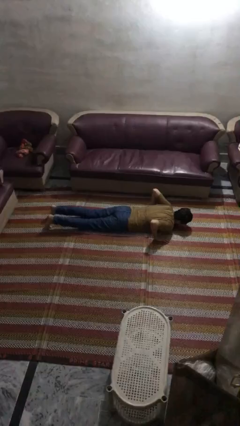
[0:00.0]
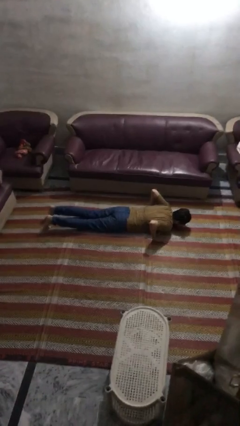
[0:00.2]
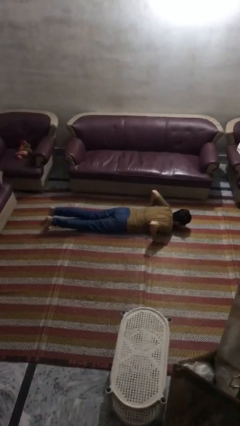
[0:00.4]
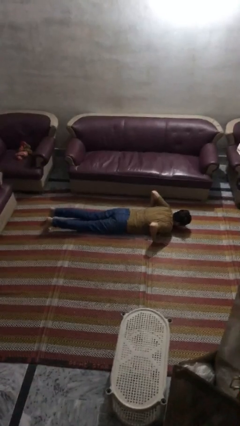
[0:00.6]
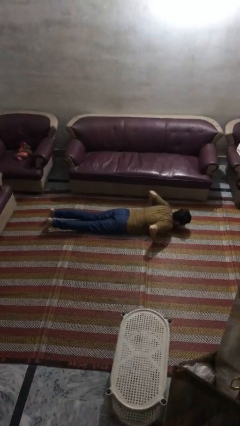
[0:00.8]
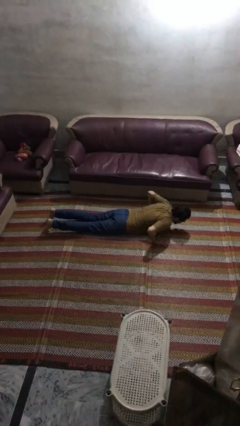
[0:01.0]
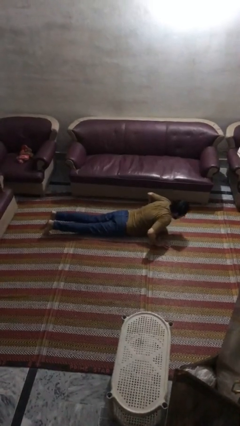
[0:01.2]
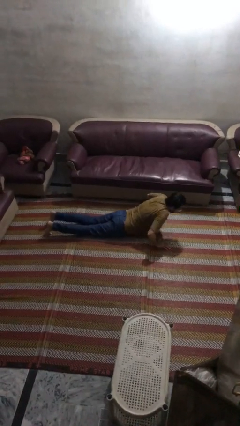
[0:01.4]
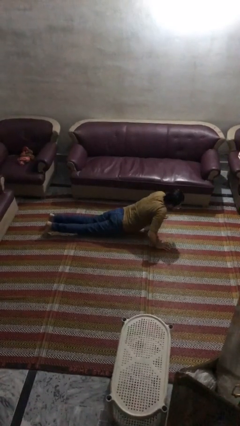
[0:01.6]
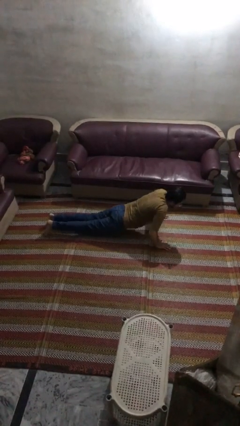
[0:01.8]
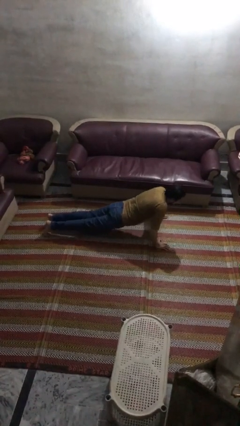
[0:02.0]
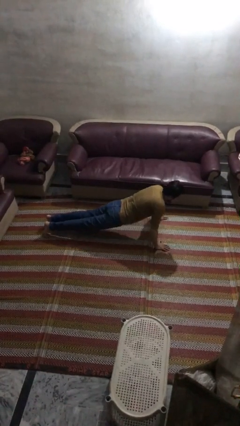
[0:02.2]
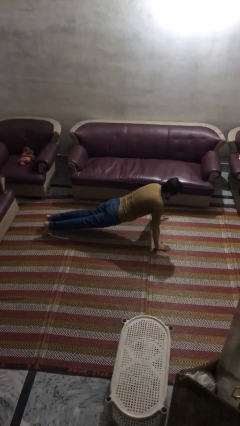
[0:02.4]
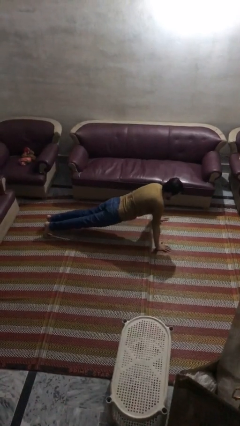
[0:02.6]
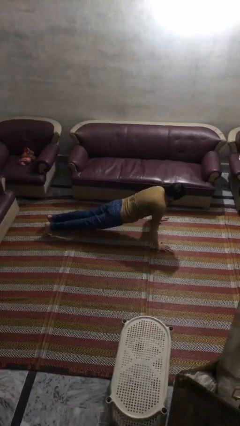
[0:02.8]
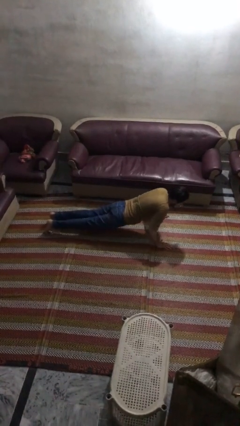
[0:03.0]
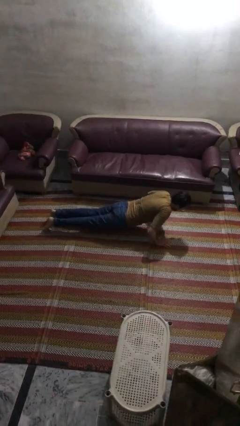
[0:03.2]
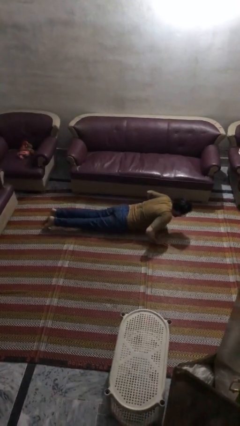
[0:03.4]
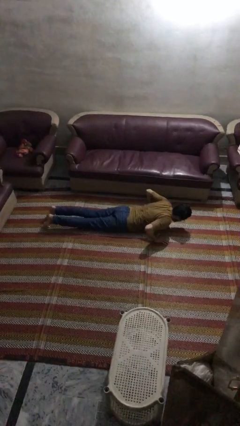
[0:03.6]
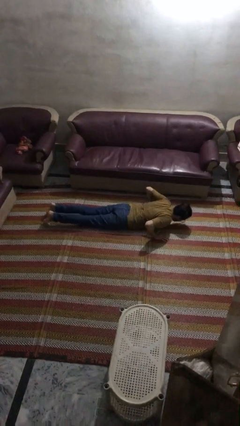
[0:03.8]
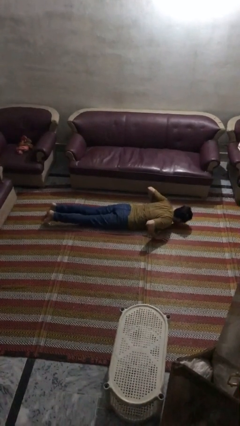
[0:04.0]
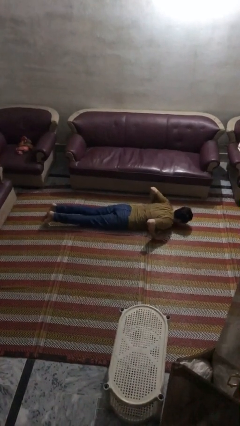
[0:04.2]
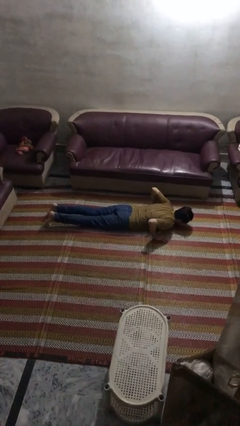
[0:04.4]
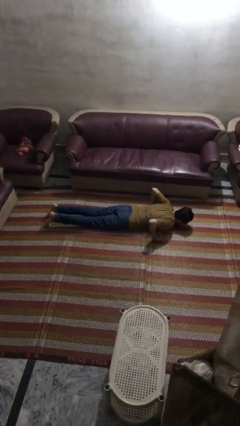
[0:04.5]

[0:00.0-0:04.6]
person exercises with pushup

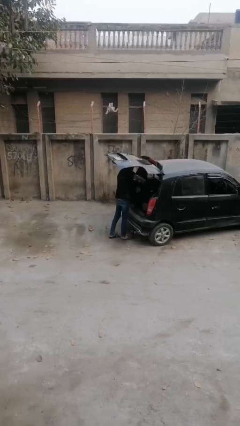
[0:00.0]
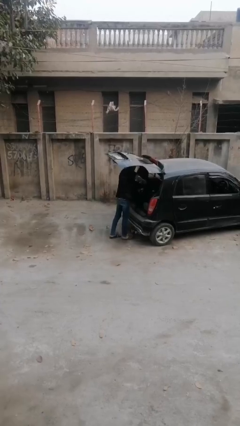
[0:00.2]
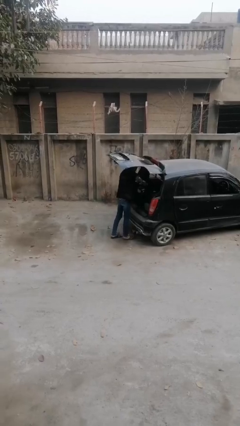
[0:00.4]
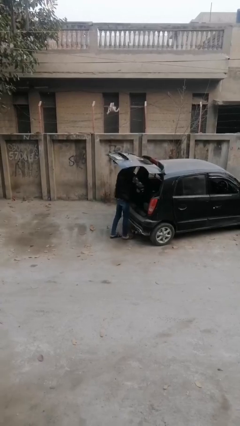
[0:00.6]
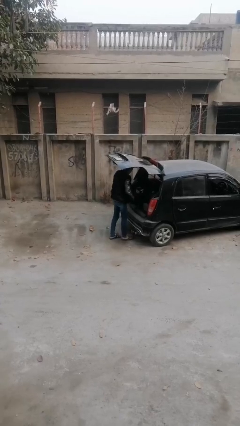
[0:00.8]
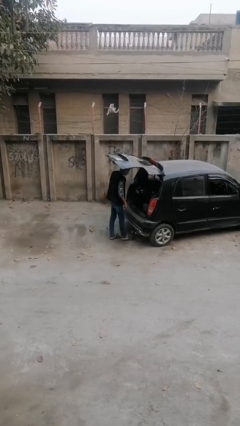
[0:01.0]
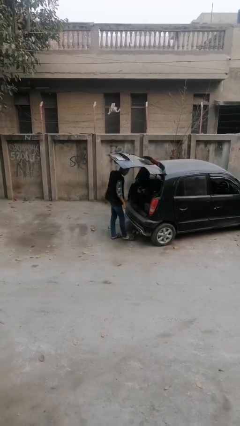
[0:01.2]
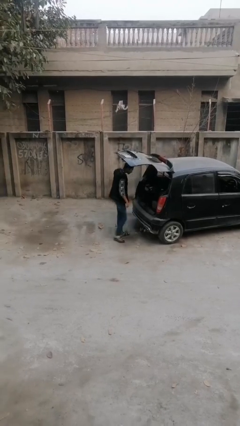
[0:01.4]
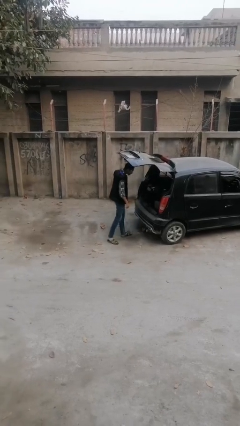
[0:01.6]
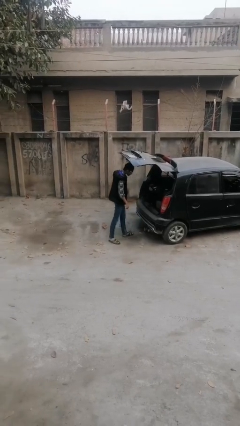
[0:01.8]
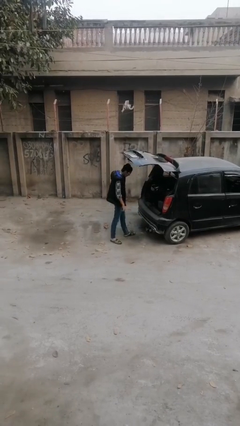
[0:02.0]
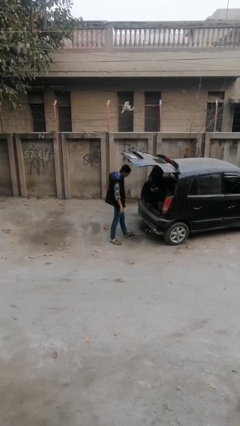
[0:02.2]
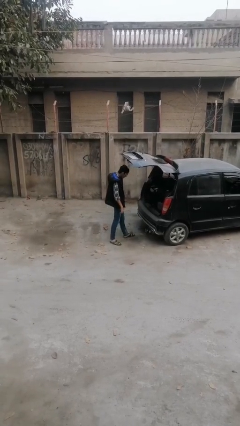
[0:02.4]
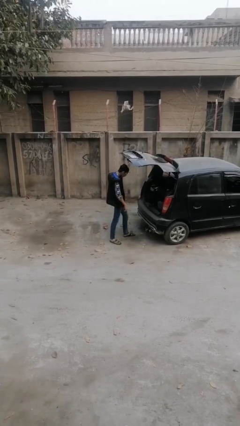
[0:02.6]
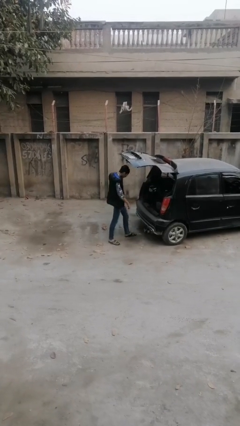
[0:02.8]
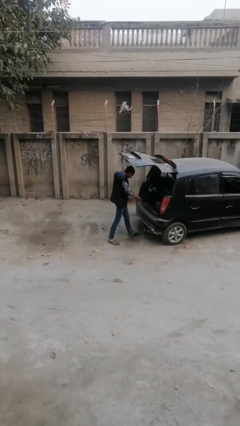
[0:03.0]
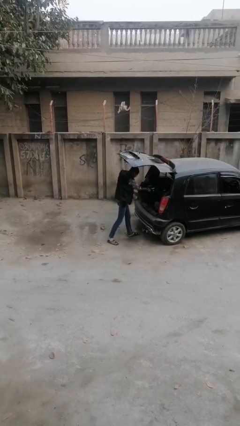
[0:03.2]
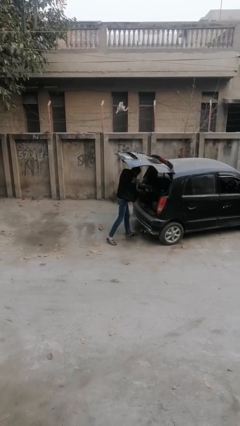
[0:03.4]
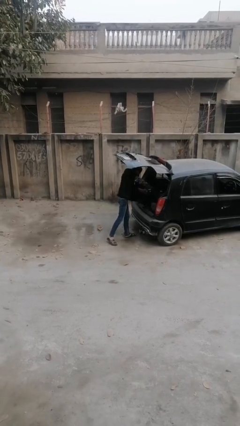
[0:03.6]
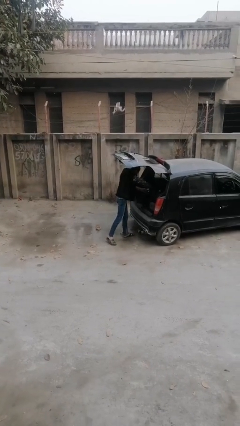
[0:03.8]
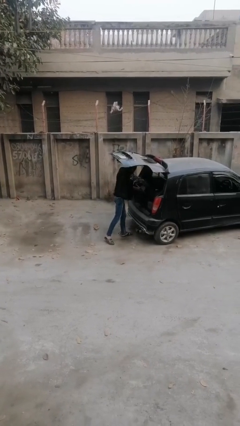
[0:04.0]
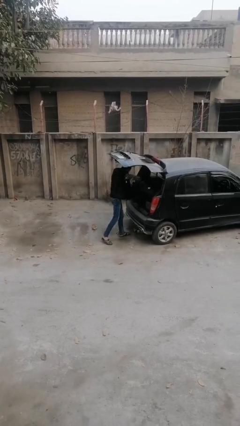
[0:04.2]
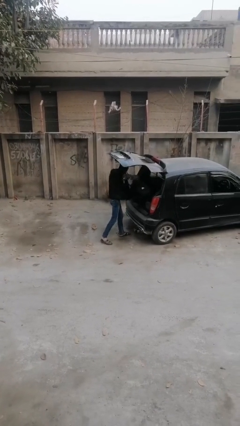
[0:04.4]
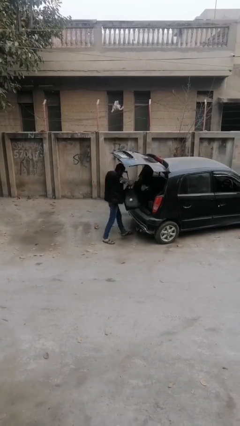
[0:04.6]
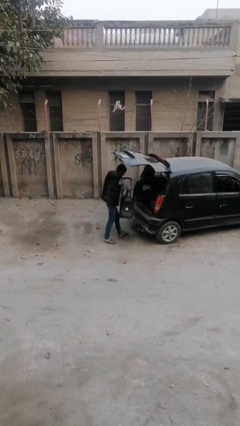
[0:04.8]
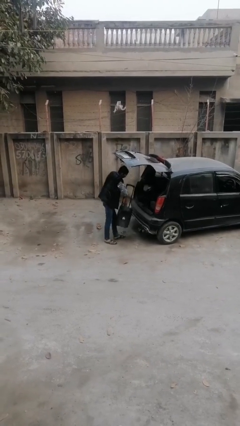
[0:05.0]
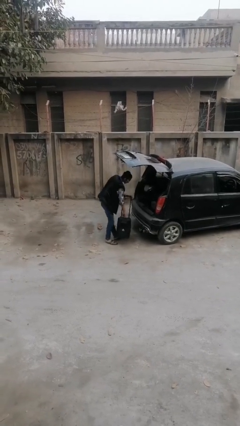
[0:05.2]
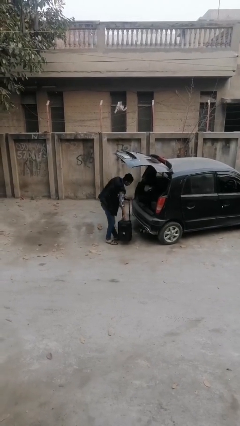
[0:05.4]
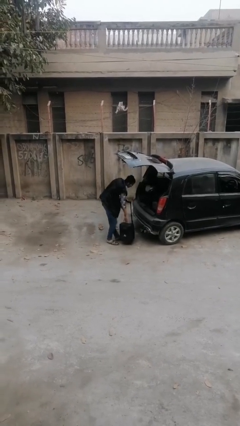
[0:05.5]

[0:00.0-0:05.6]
person loads car

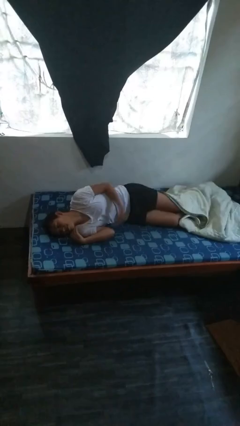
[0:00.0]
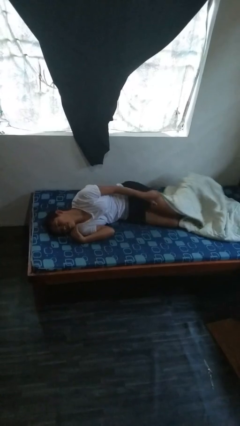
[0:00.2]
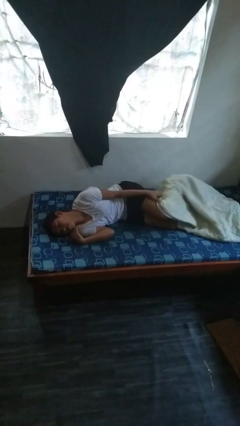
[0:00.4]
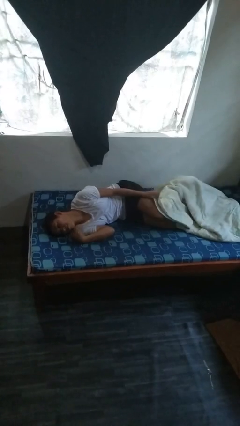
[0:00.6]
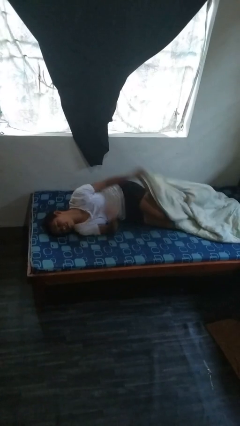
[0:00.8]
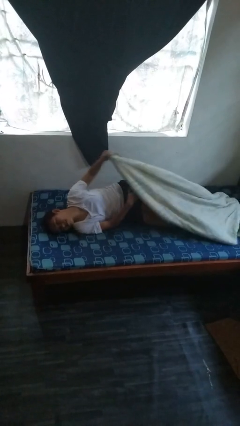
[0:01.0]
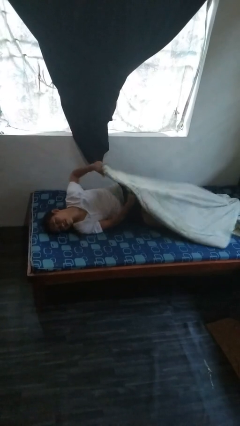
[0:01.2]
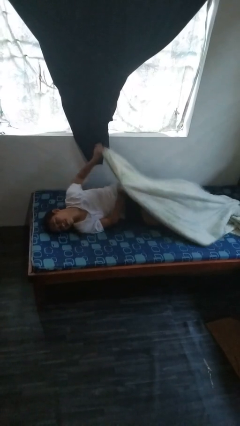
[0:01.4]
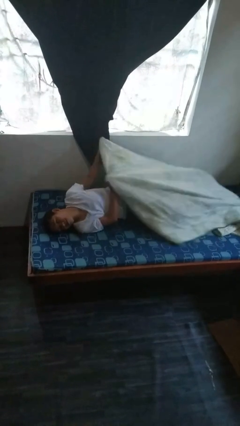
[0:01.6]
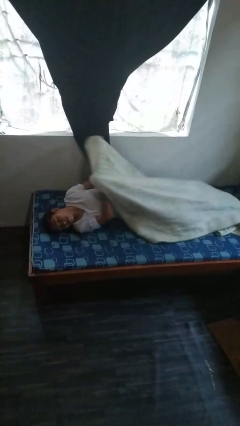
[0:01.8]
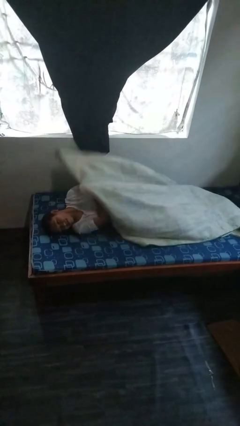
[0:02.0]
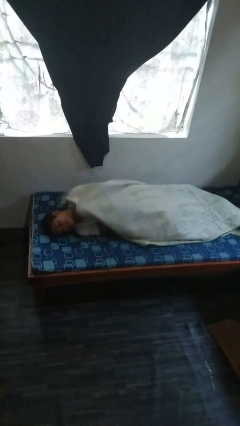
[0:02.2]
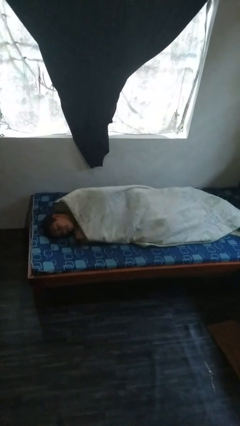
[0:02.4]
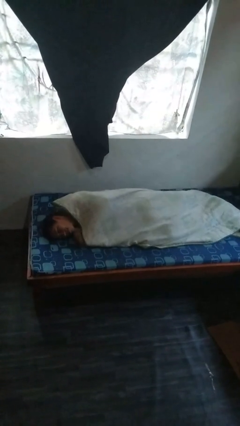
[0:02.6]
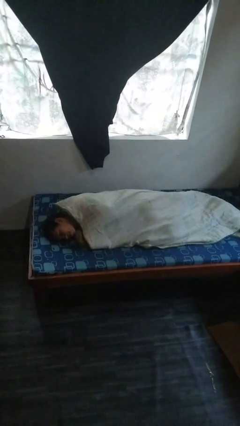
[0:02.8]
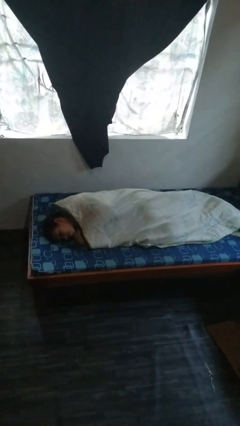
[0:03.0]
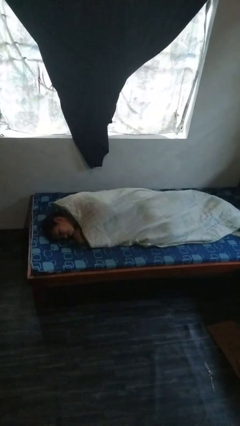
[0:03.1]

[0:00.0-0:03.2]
person covers with bedsheets

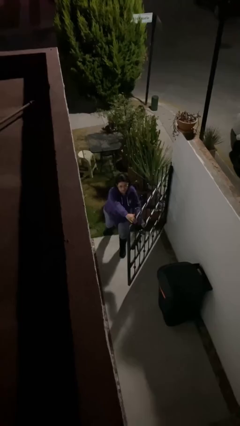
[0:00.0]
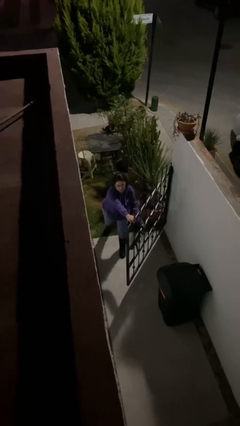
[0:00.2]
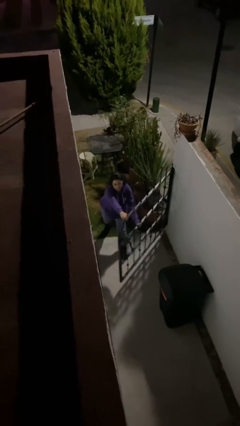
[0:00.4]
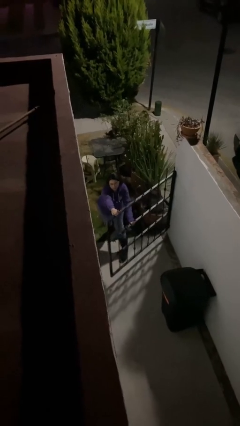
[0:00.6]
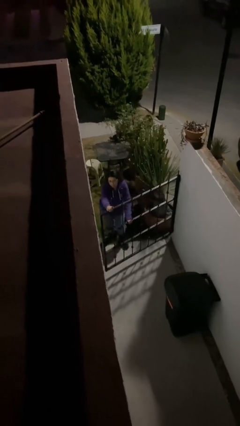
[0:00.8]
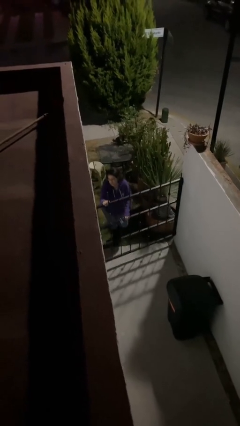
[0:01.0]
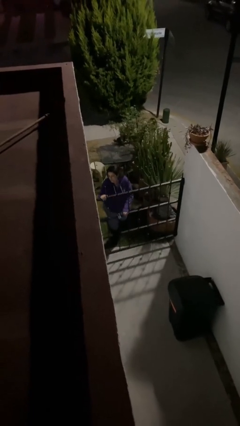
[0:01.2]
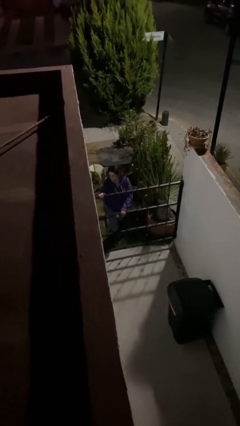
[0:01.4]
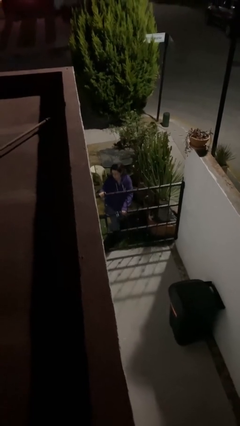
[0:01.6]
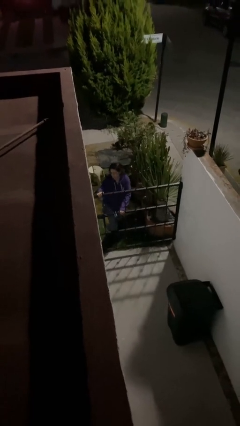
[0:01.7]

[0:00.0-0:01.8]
person closes facility door

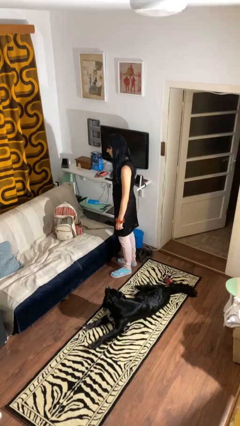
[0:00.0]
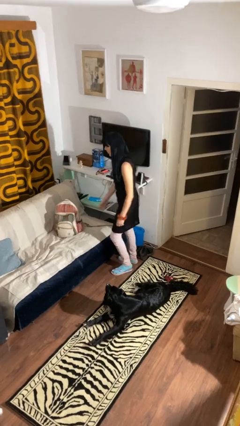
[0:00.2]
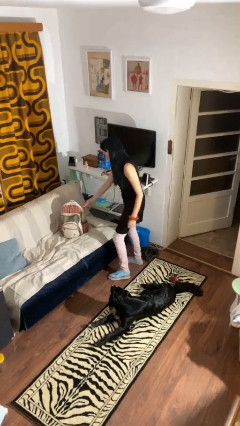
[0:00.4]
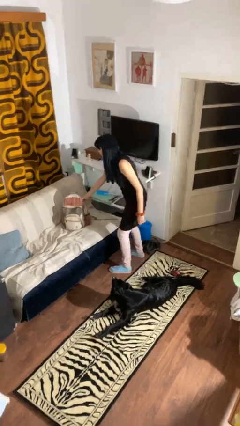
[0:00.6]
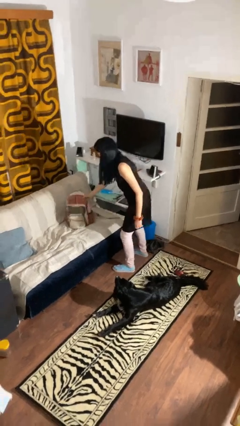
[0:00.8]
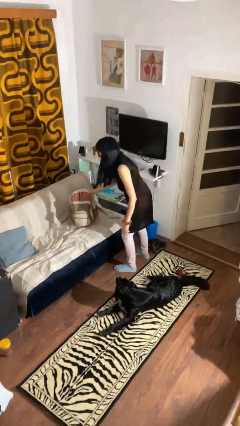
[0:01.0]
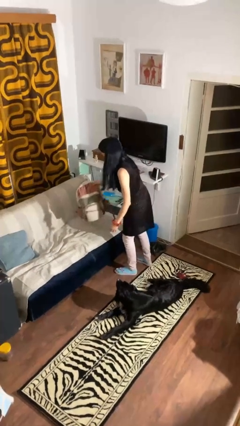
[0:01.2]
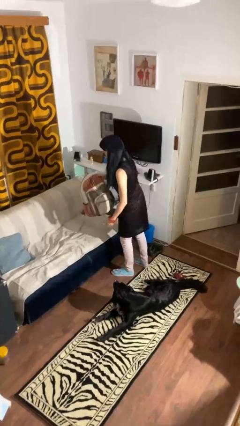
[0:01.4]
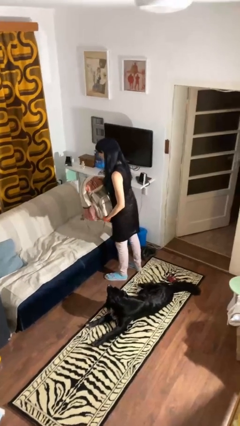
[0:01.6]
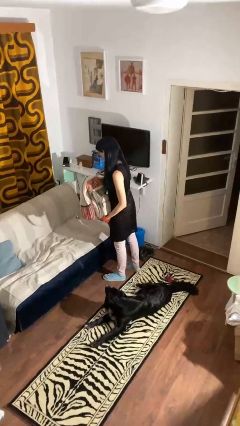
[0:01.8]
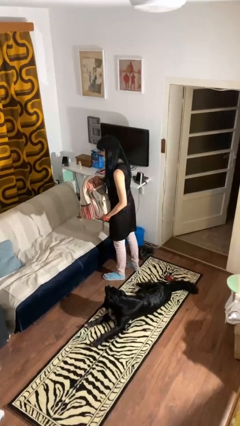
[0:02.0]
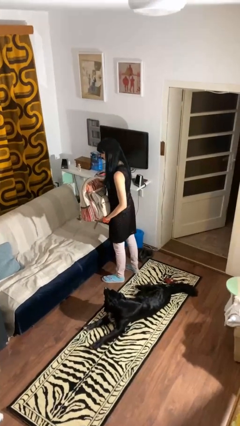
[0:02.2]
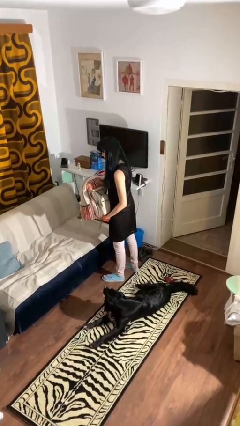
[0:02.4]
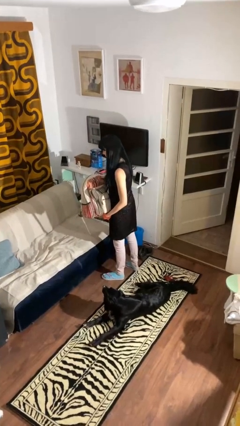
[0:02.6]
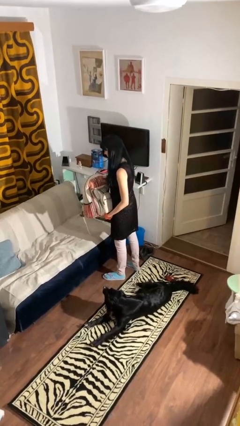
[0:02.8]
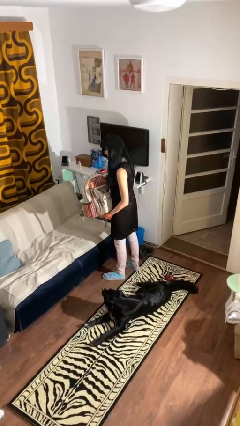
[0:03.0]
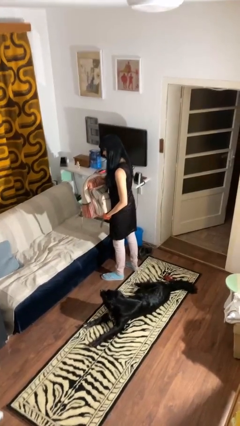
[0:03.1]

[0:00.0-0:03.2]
person picks up object from couch
